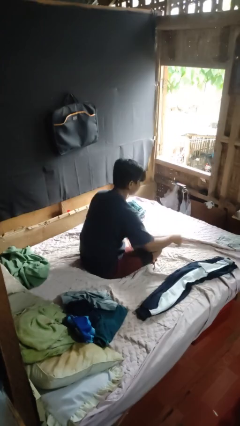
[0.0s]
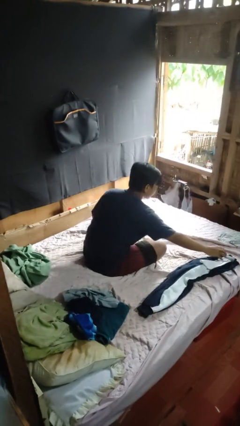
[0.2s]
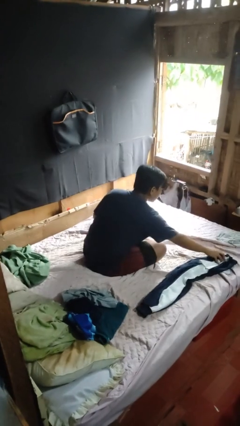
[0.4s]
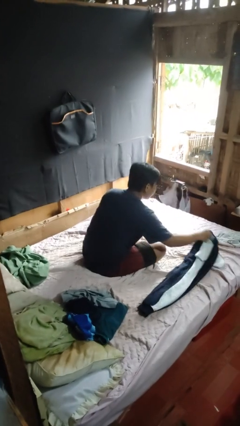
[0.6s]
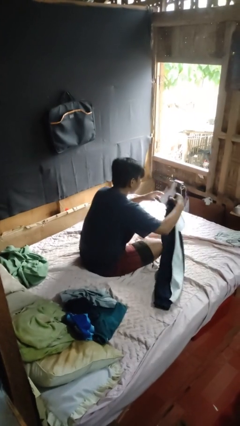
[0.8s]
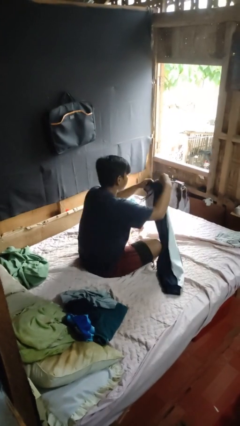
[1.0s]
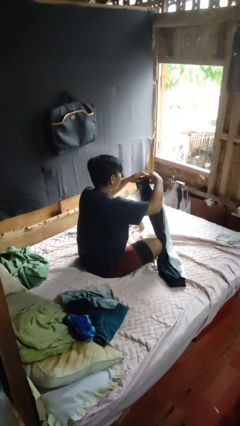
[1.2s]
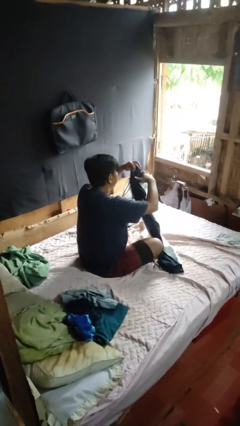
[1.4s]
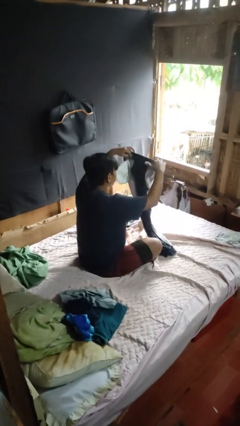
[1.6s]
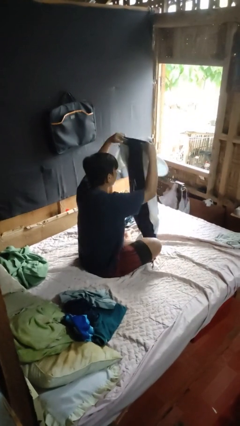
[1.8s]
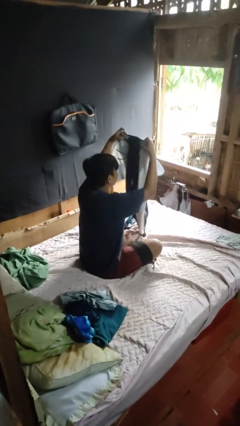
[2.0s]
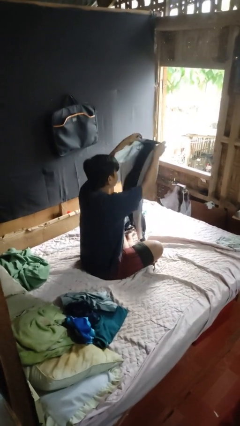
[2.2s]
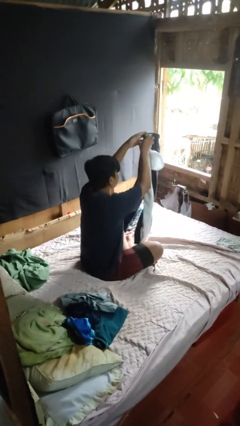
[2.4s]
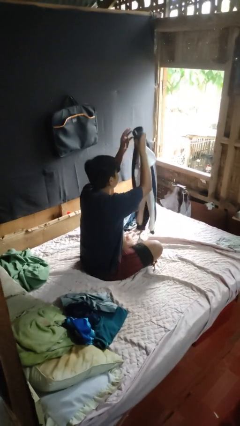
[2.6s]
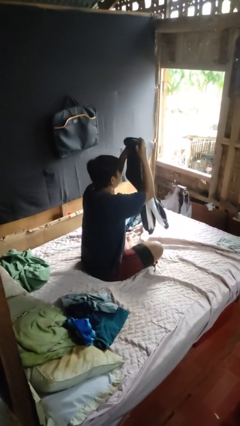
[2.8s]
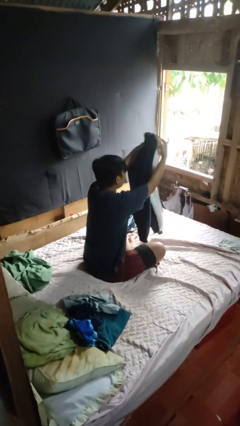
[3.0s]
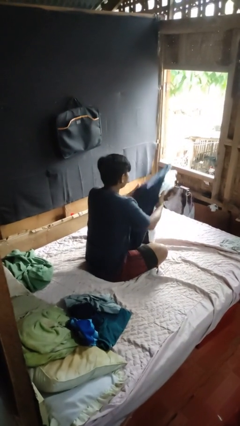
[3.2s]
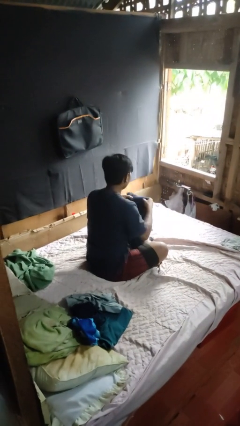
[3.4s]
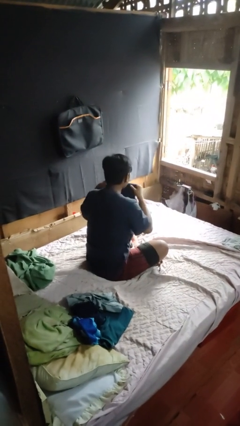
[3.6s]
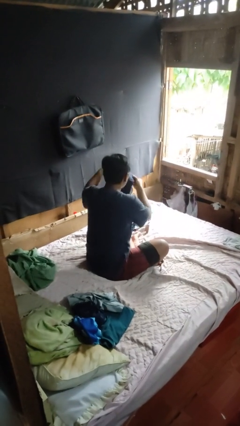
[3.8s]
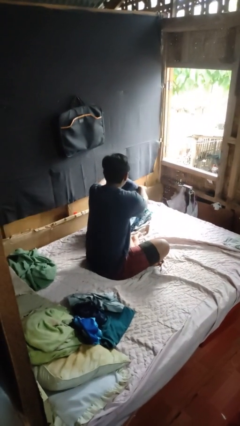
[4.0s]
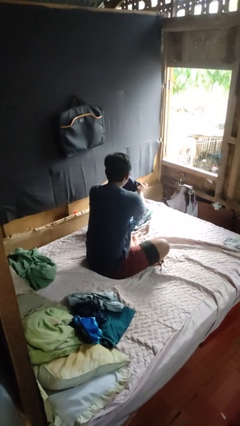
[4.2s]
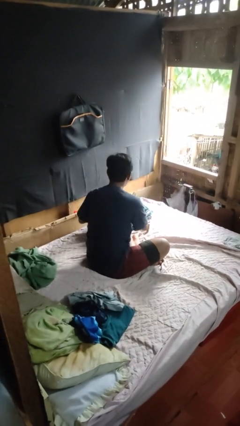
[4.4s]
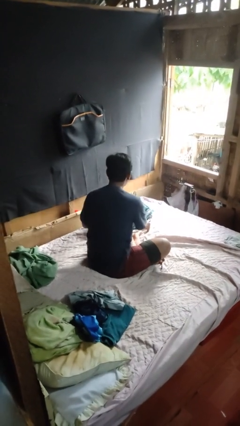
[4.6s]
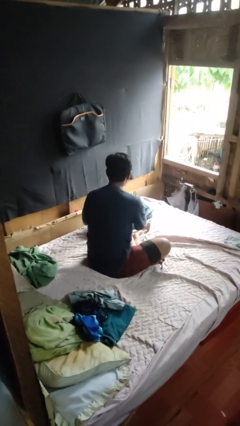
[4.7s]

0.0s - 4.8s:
person folds pants

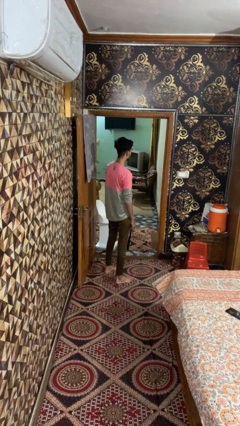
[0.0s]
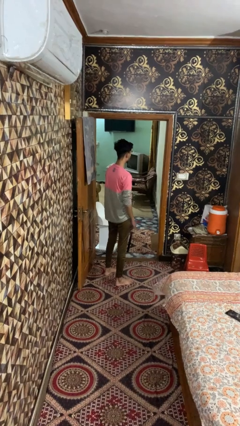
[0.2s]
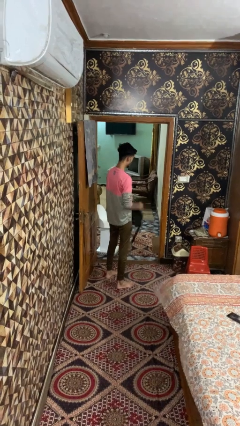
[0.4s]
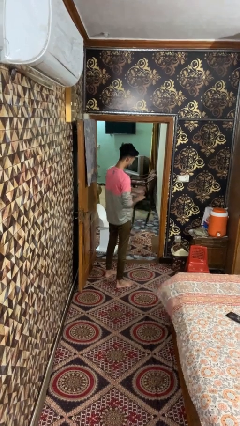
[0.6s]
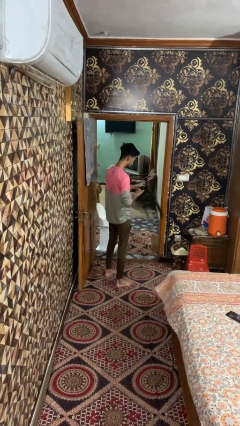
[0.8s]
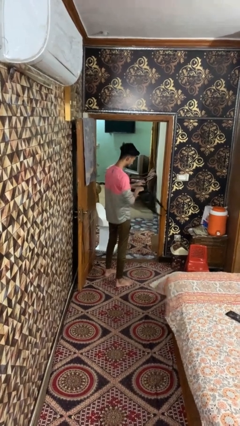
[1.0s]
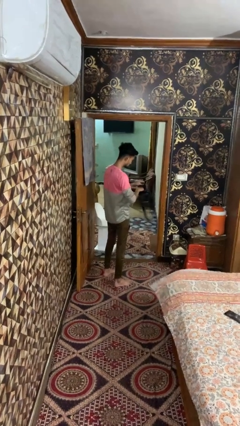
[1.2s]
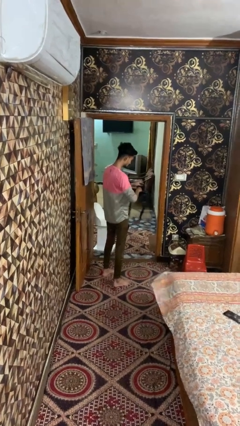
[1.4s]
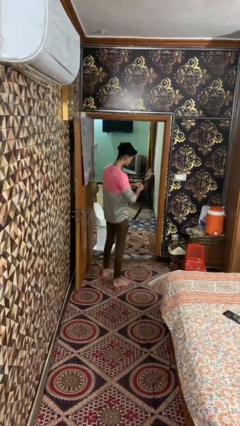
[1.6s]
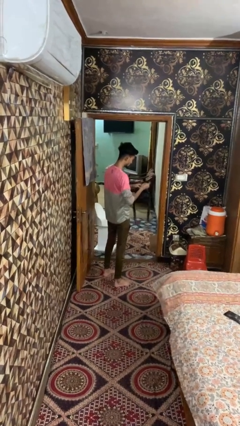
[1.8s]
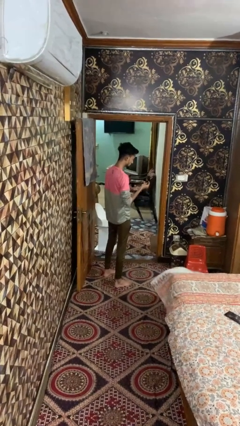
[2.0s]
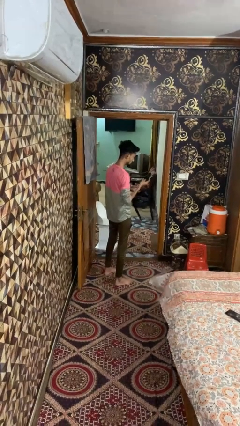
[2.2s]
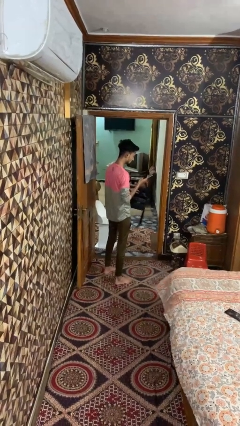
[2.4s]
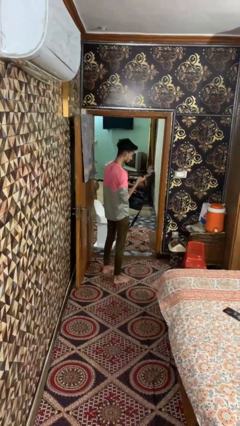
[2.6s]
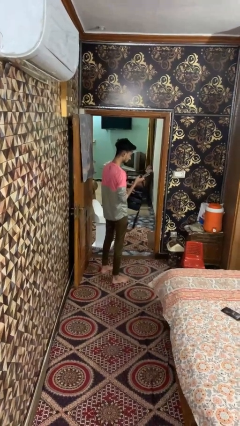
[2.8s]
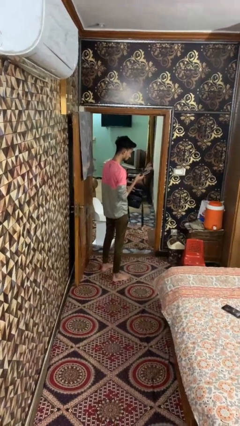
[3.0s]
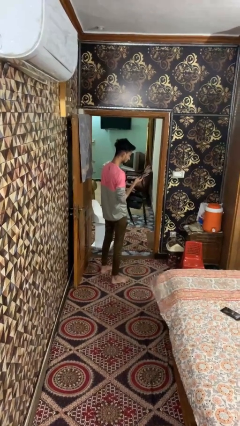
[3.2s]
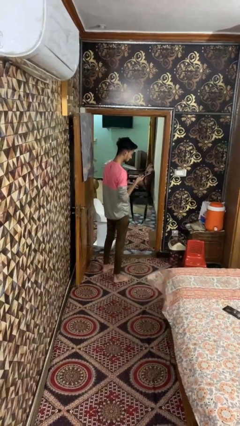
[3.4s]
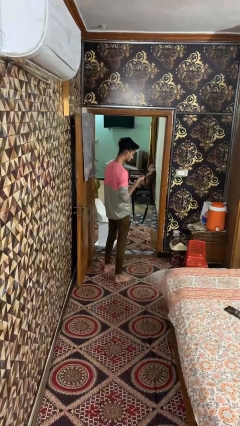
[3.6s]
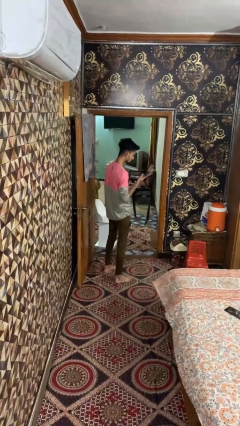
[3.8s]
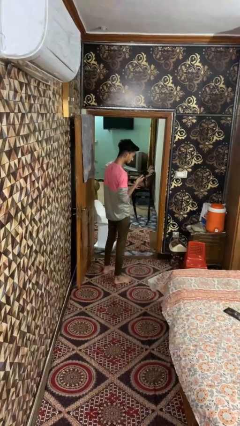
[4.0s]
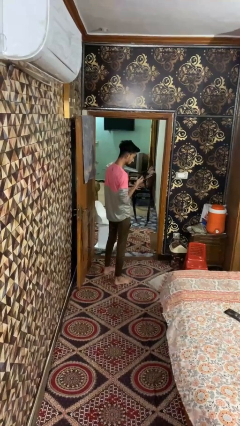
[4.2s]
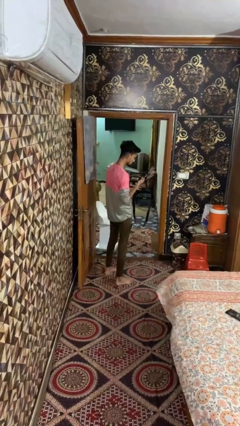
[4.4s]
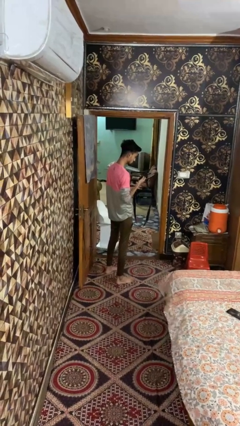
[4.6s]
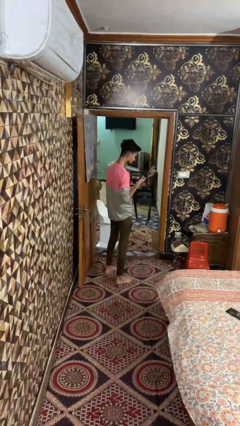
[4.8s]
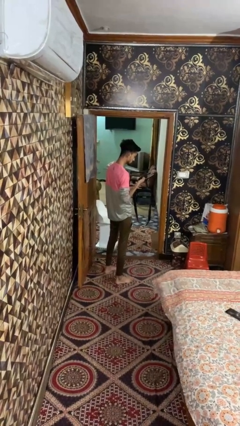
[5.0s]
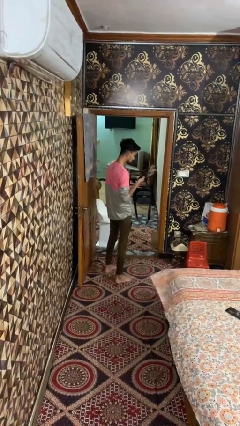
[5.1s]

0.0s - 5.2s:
person takes object from bag

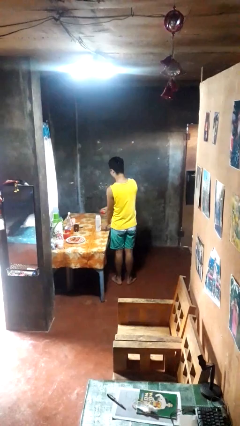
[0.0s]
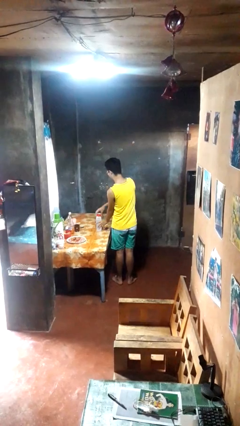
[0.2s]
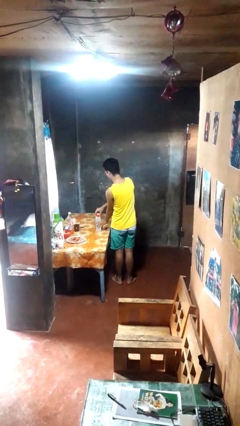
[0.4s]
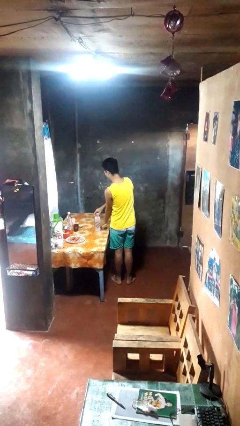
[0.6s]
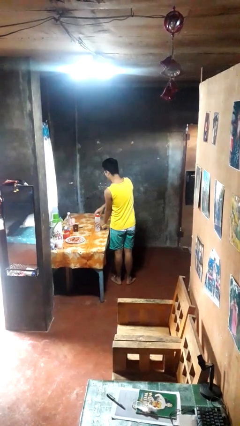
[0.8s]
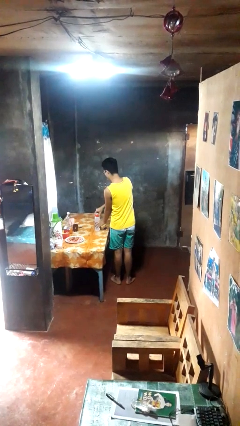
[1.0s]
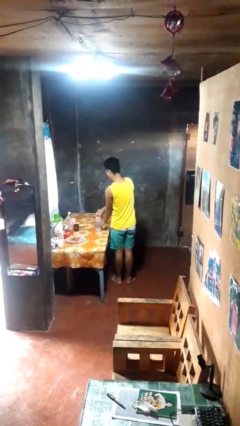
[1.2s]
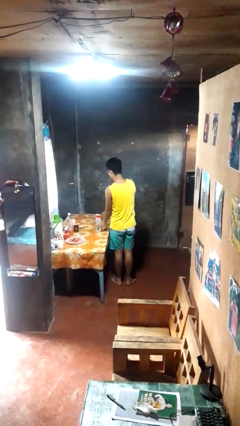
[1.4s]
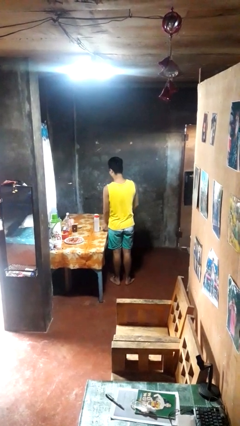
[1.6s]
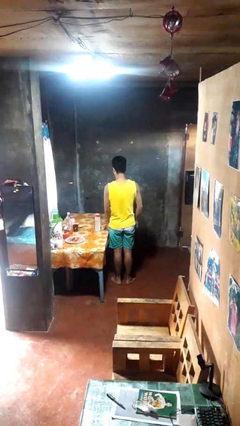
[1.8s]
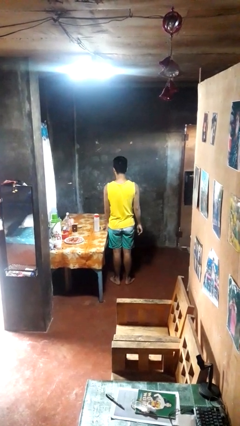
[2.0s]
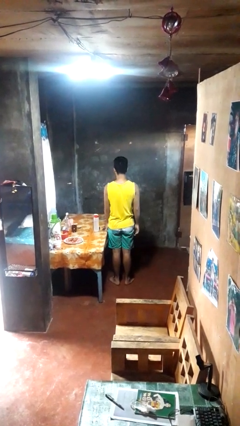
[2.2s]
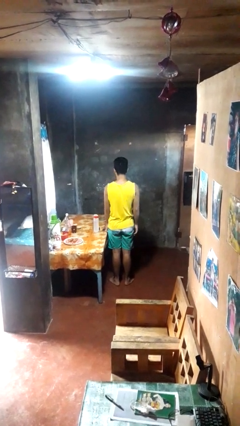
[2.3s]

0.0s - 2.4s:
person closes jar

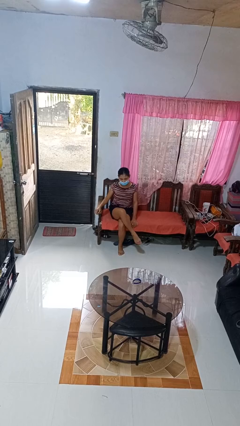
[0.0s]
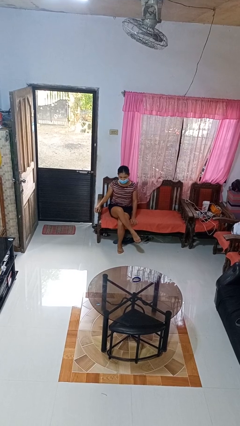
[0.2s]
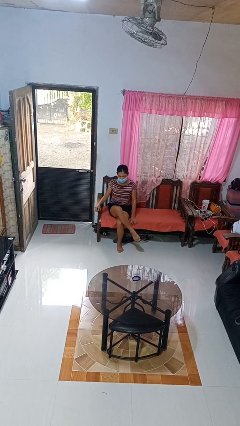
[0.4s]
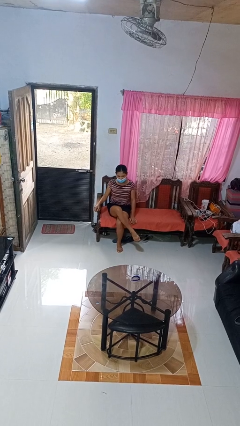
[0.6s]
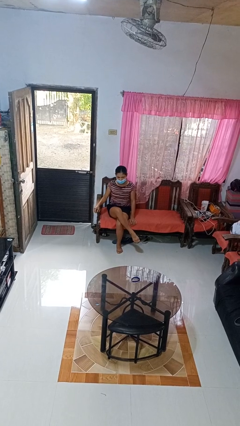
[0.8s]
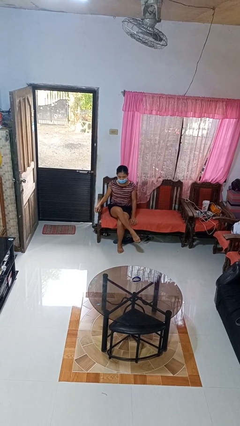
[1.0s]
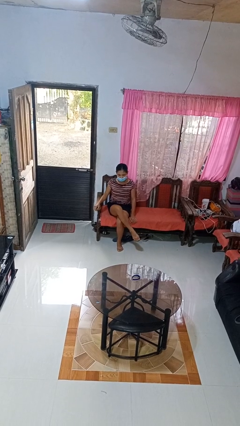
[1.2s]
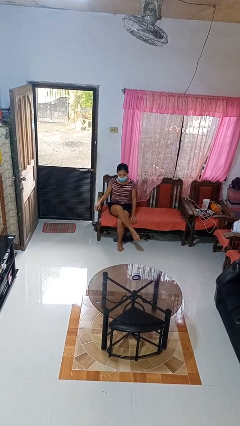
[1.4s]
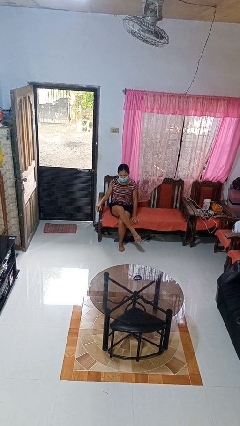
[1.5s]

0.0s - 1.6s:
person crosses legs

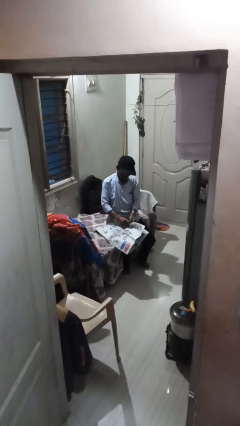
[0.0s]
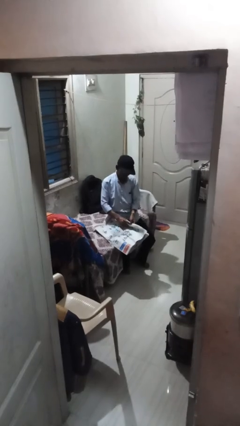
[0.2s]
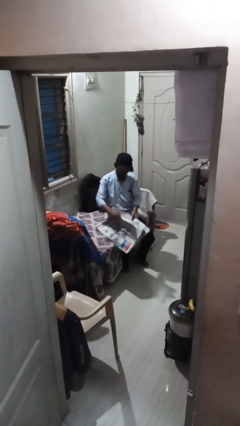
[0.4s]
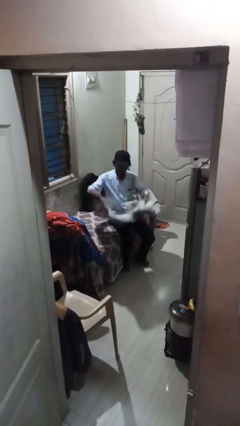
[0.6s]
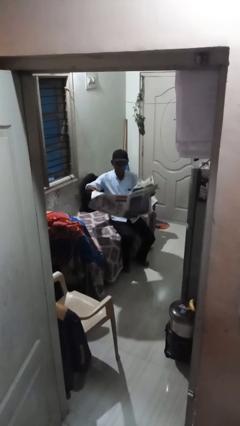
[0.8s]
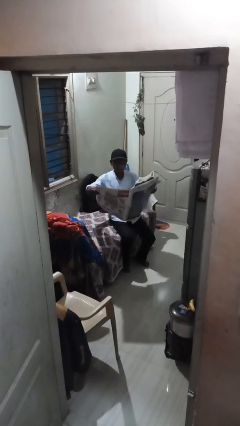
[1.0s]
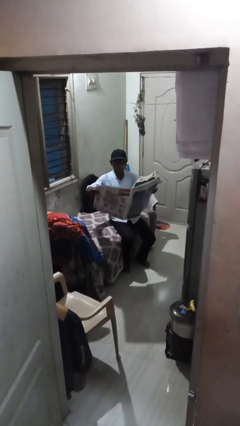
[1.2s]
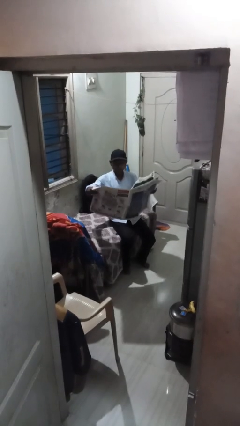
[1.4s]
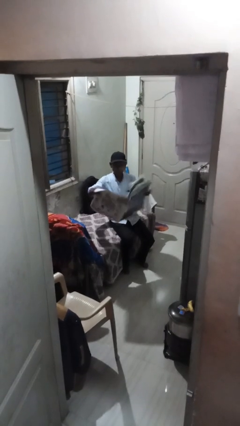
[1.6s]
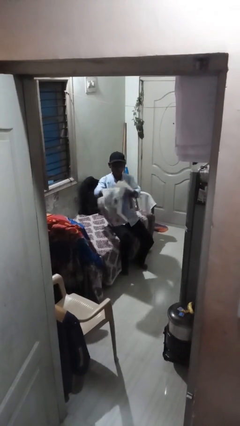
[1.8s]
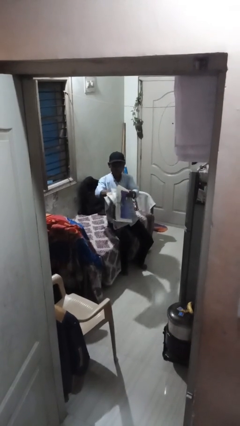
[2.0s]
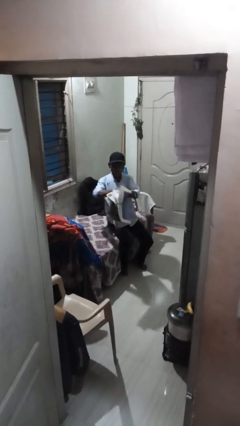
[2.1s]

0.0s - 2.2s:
person reads newspaper

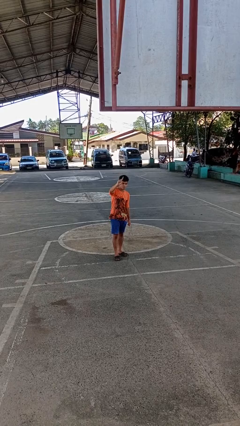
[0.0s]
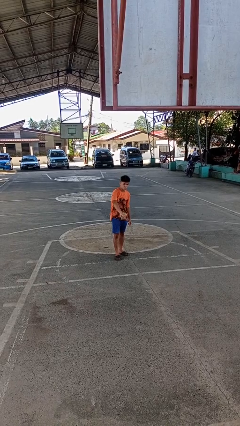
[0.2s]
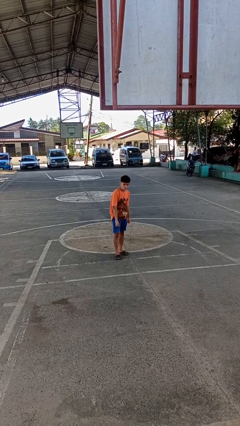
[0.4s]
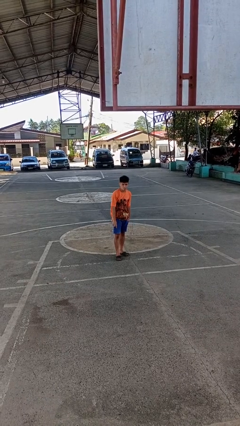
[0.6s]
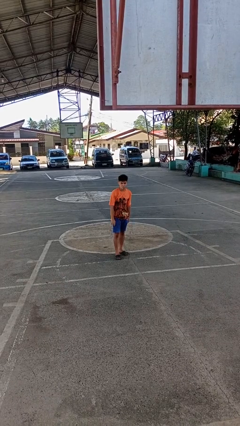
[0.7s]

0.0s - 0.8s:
person gestures swipe down

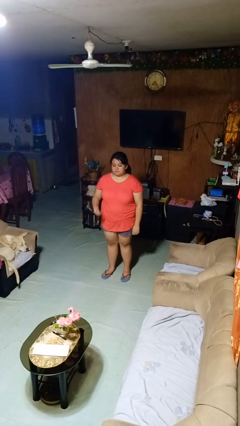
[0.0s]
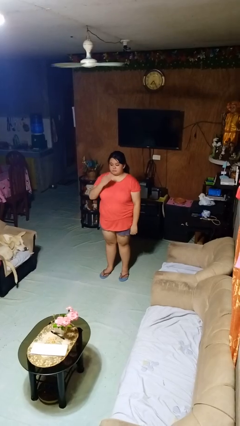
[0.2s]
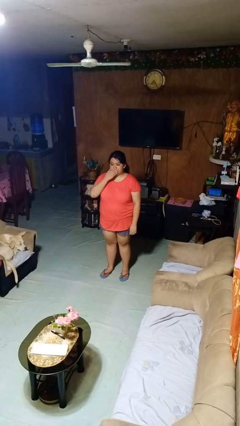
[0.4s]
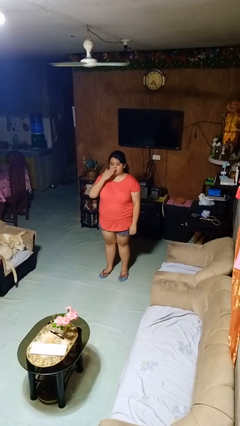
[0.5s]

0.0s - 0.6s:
person gestures blow kiss
